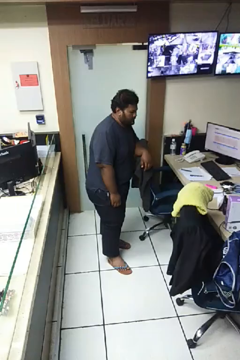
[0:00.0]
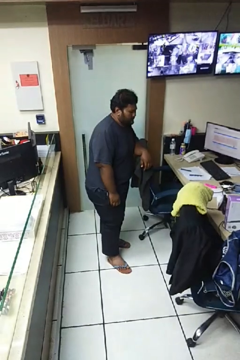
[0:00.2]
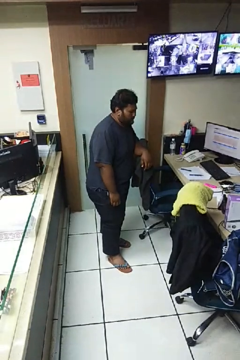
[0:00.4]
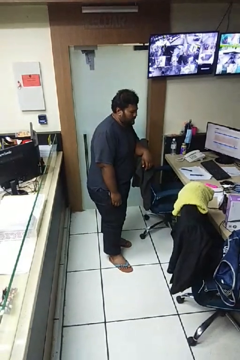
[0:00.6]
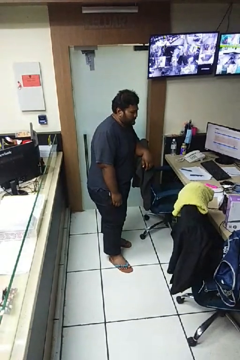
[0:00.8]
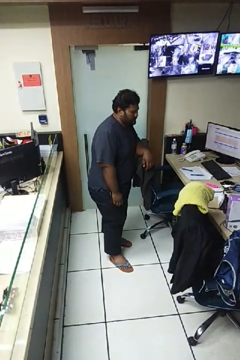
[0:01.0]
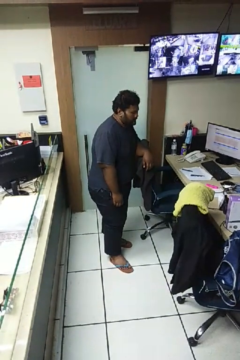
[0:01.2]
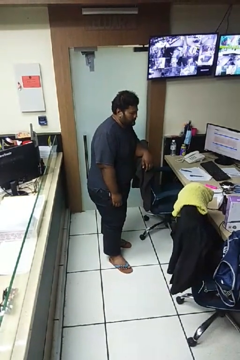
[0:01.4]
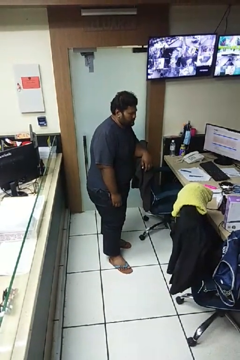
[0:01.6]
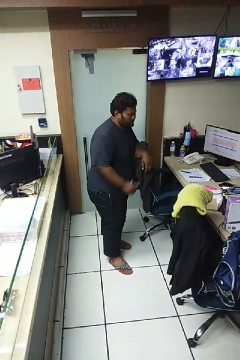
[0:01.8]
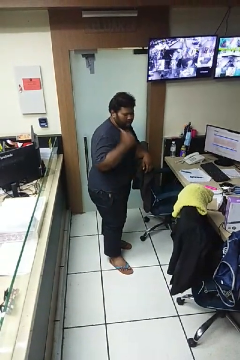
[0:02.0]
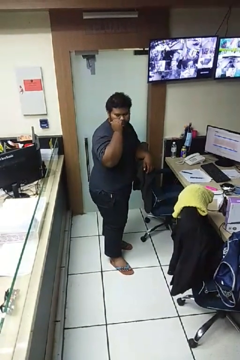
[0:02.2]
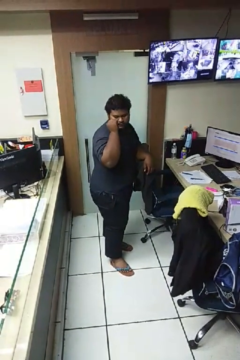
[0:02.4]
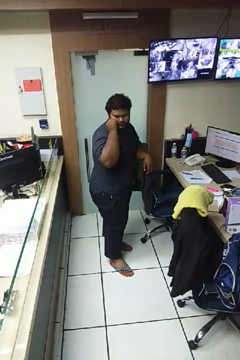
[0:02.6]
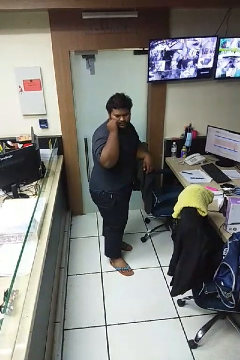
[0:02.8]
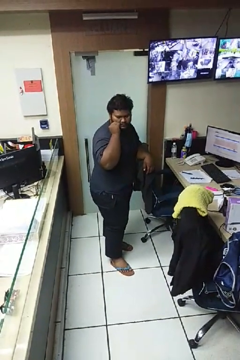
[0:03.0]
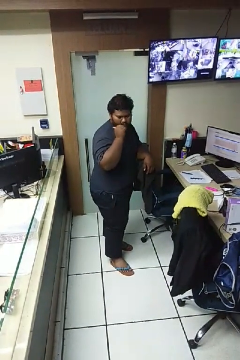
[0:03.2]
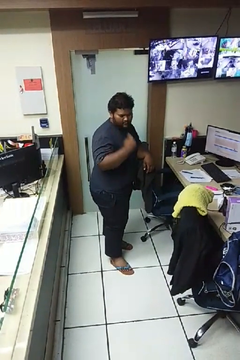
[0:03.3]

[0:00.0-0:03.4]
person gestures behind me

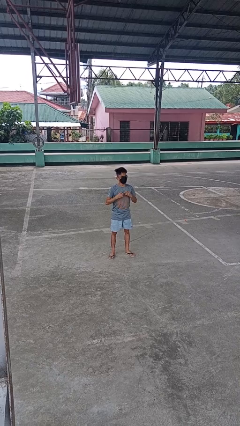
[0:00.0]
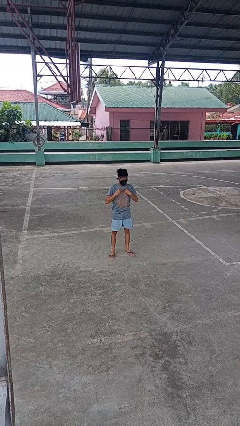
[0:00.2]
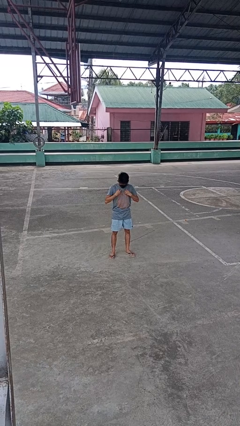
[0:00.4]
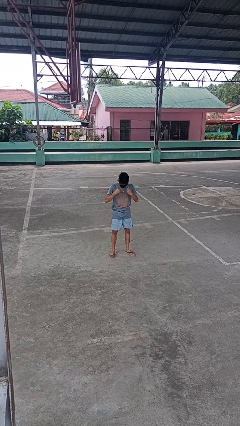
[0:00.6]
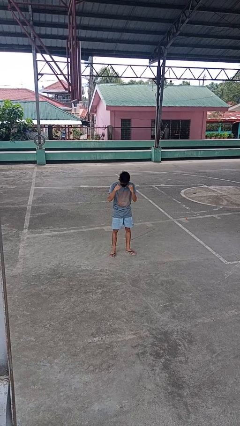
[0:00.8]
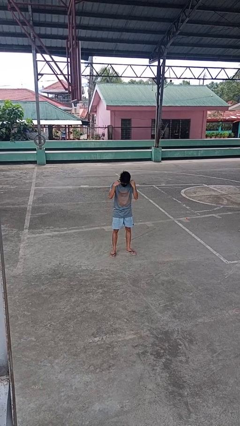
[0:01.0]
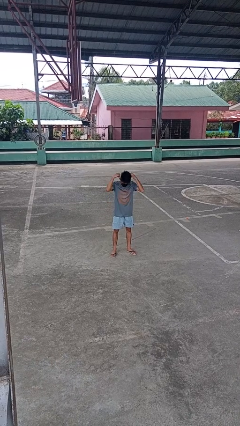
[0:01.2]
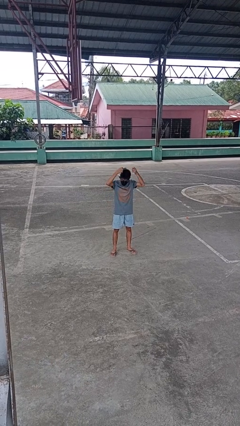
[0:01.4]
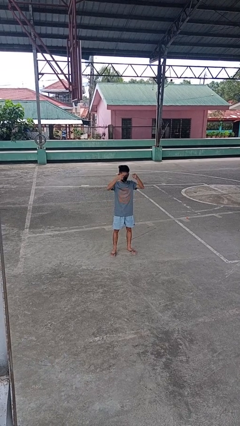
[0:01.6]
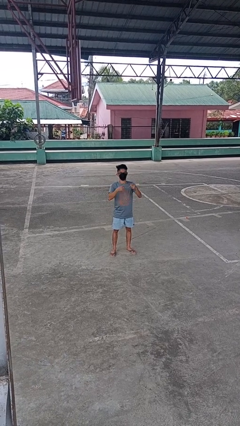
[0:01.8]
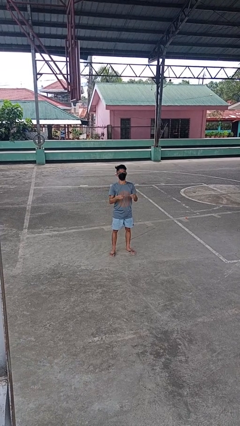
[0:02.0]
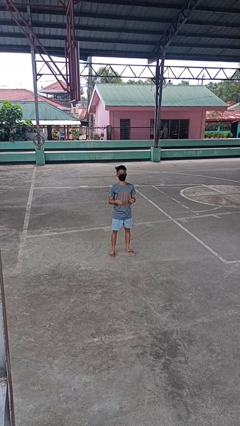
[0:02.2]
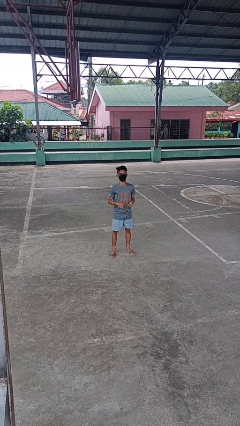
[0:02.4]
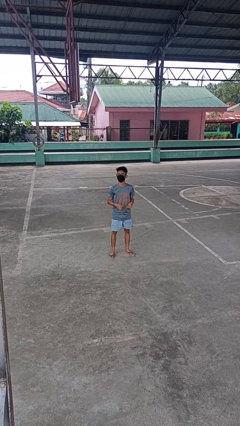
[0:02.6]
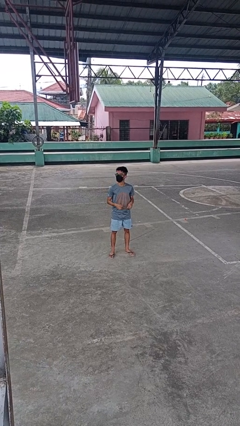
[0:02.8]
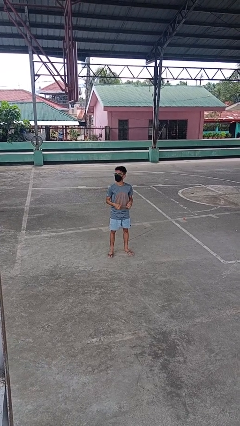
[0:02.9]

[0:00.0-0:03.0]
person takes off necklace

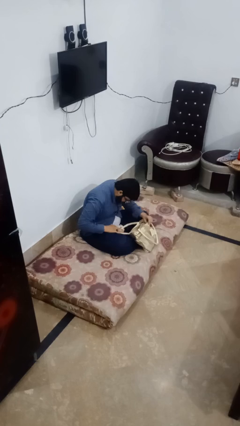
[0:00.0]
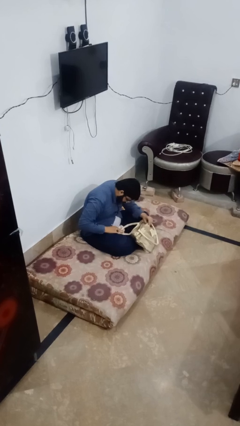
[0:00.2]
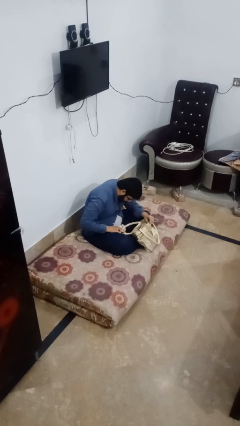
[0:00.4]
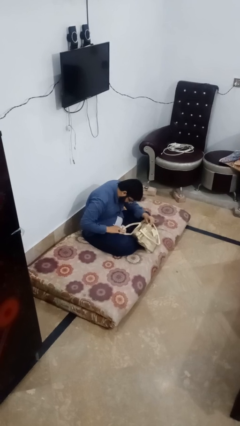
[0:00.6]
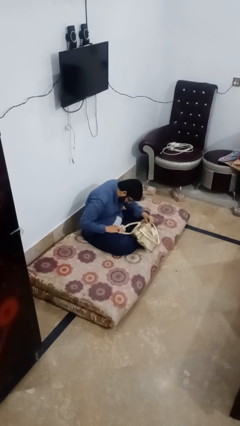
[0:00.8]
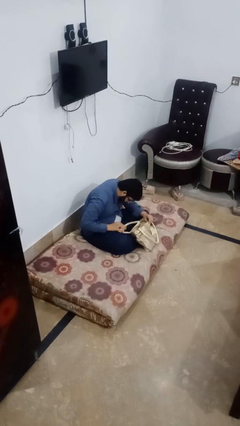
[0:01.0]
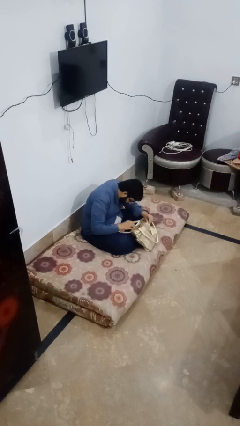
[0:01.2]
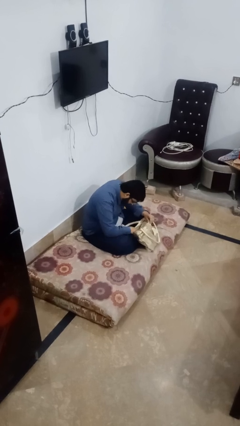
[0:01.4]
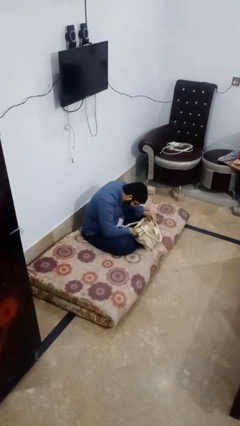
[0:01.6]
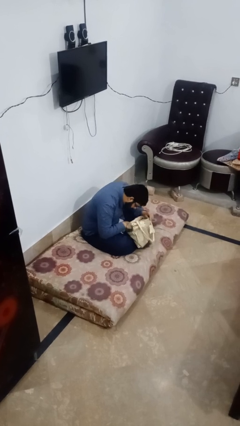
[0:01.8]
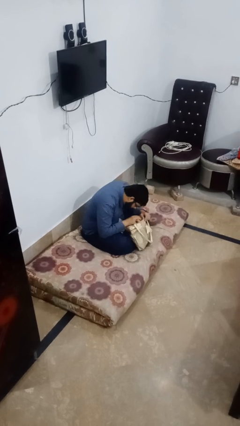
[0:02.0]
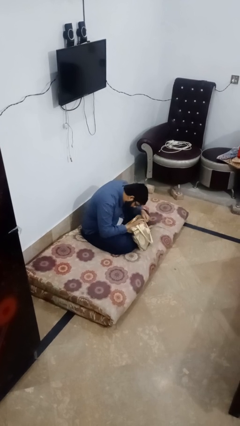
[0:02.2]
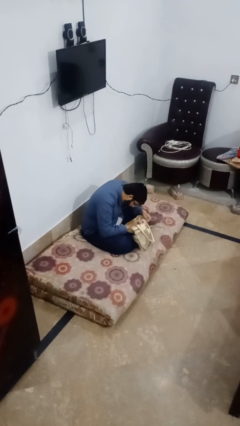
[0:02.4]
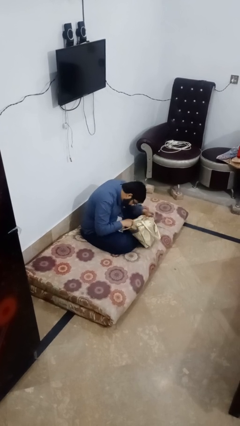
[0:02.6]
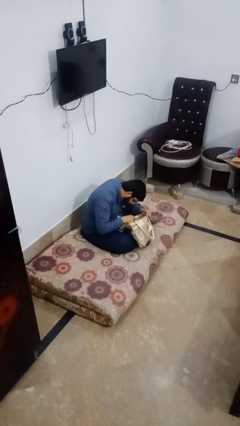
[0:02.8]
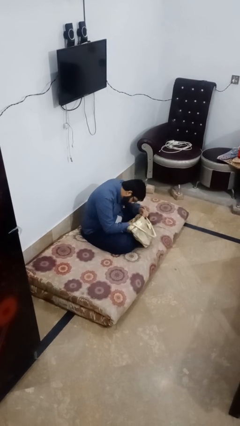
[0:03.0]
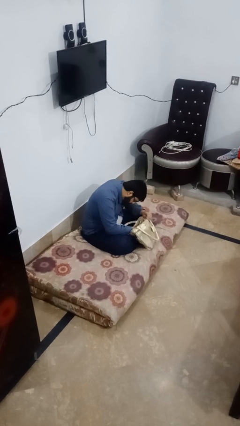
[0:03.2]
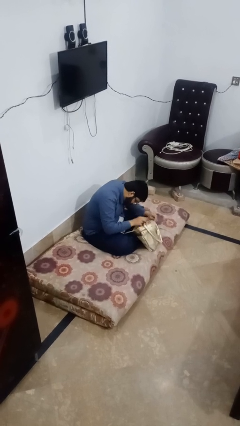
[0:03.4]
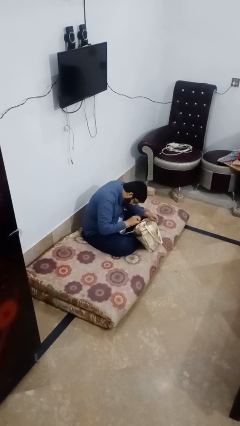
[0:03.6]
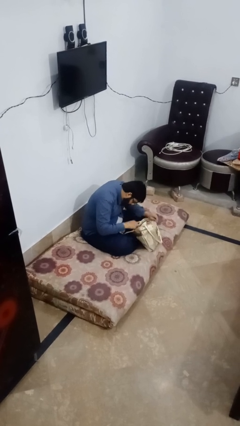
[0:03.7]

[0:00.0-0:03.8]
person searches in bag

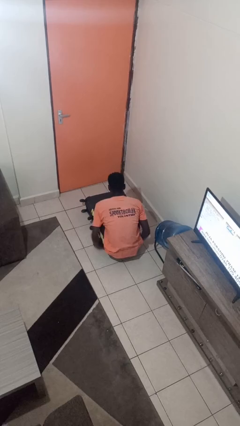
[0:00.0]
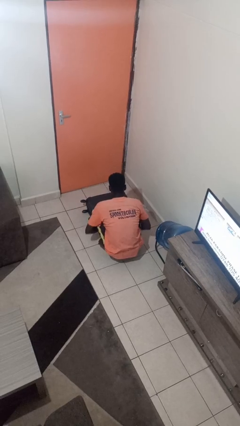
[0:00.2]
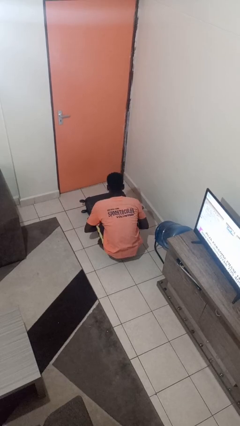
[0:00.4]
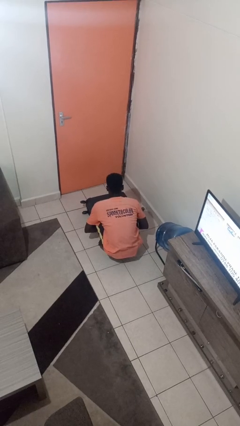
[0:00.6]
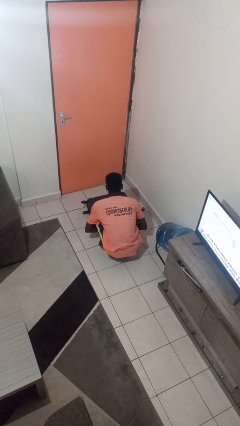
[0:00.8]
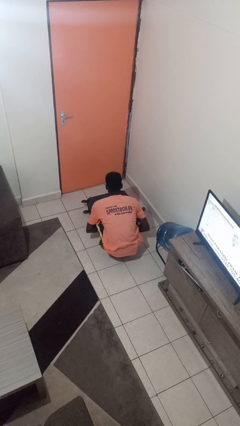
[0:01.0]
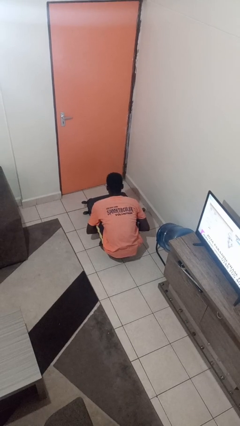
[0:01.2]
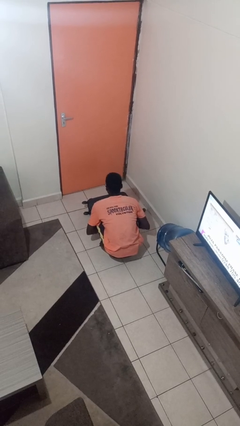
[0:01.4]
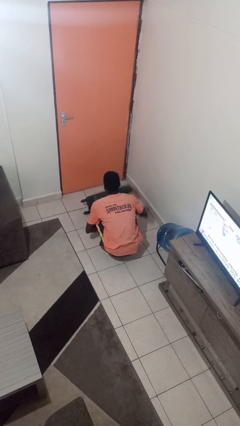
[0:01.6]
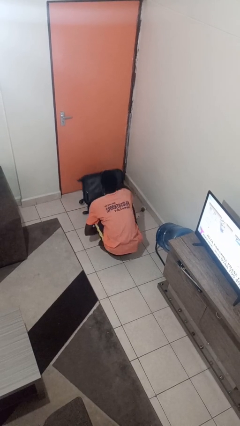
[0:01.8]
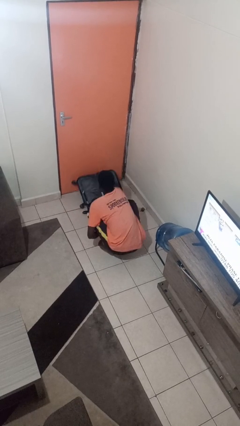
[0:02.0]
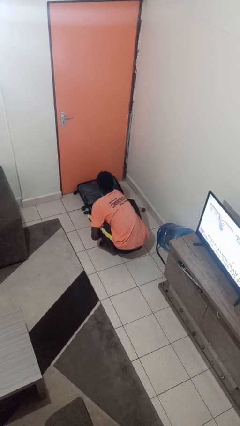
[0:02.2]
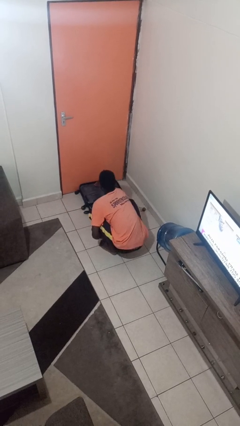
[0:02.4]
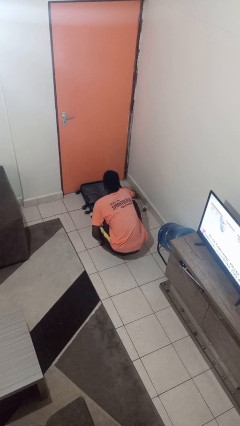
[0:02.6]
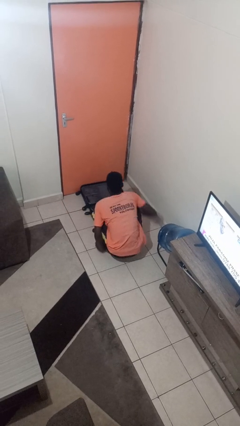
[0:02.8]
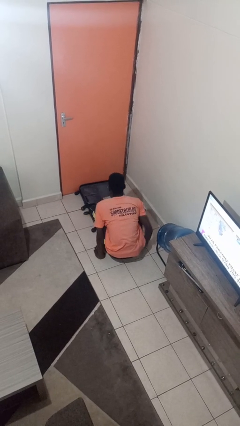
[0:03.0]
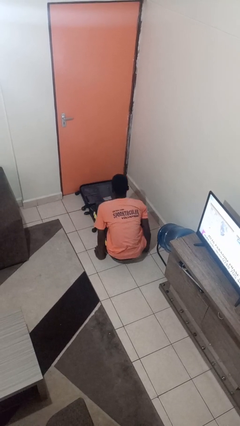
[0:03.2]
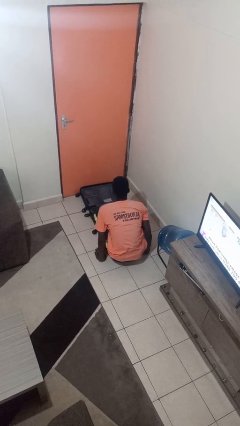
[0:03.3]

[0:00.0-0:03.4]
person opens suitcase

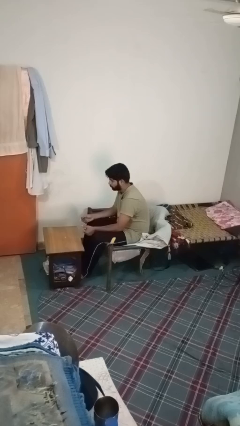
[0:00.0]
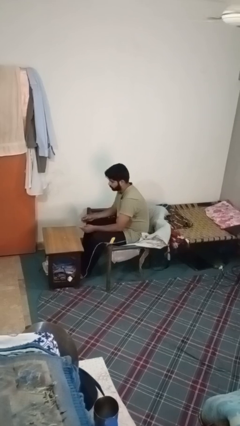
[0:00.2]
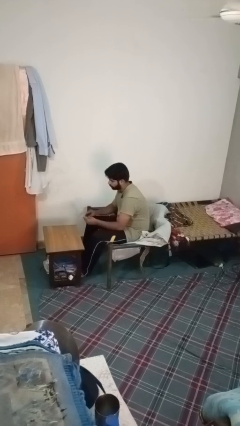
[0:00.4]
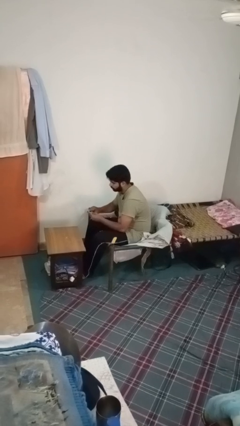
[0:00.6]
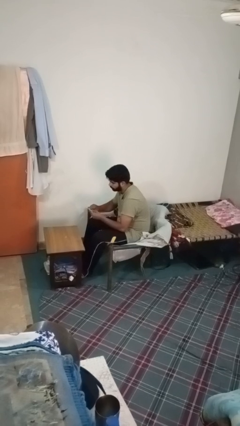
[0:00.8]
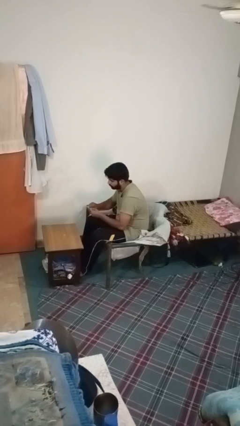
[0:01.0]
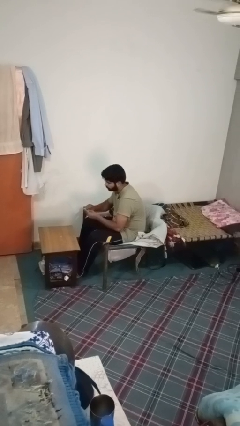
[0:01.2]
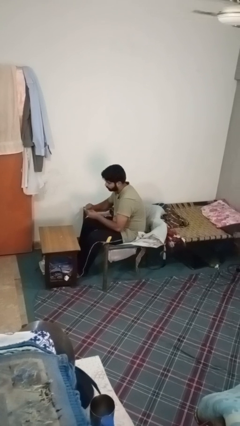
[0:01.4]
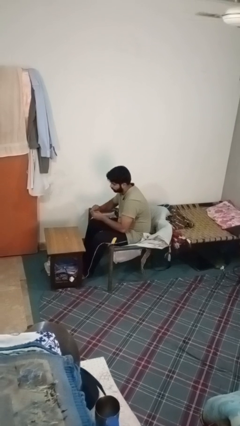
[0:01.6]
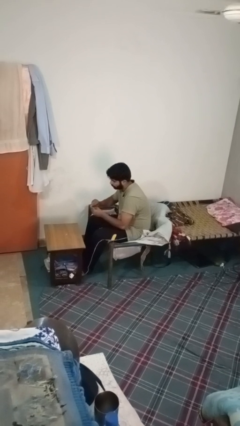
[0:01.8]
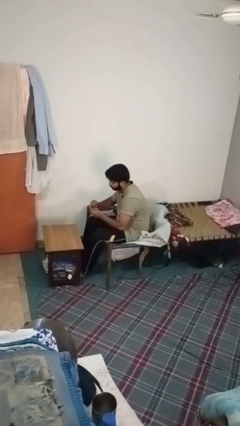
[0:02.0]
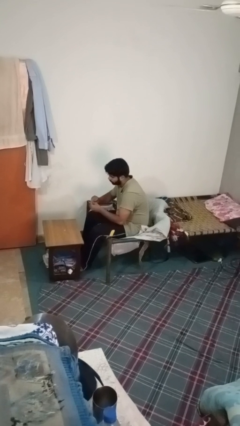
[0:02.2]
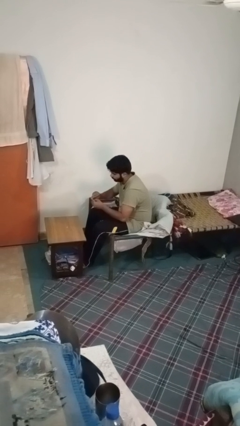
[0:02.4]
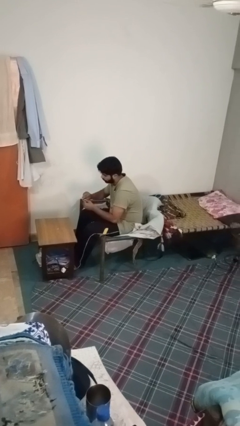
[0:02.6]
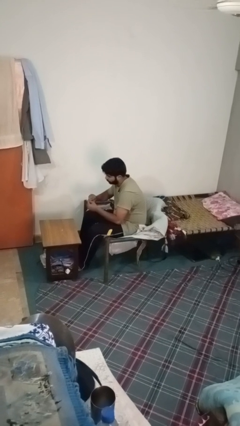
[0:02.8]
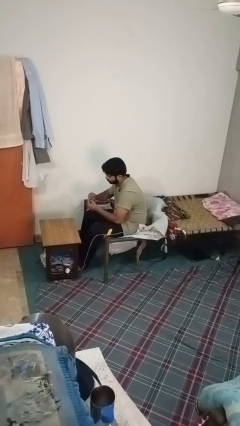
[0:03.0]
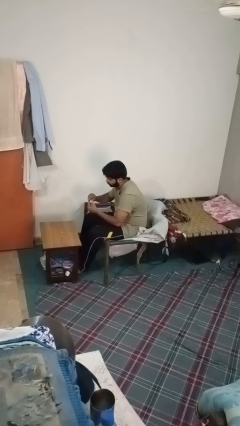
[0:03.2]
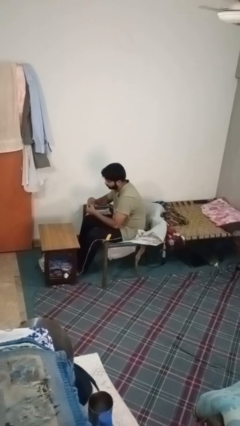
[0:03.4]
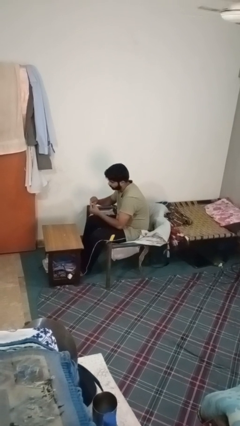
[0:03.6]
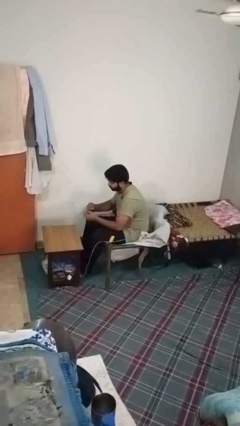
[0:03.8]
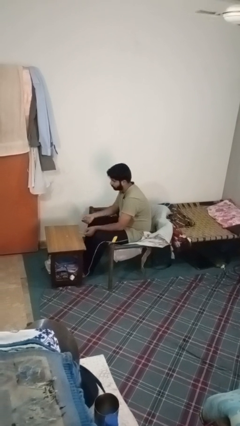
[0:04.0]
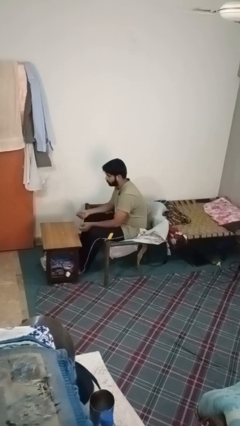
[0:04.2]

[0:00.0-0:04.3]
person files fingernails
